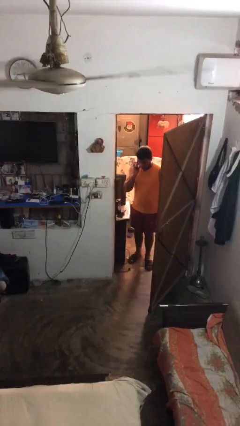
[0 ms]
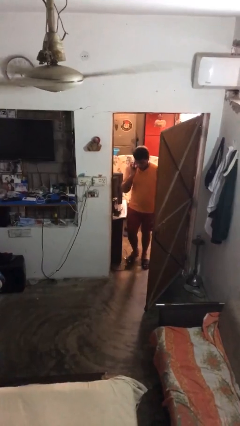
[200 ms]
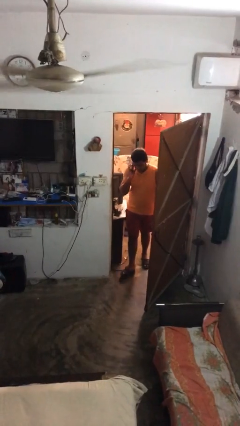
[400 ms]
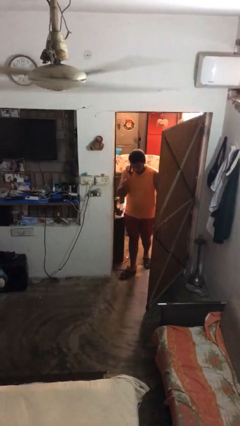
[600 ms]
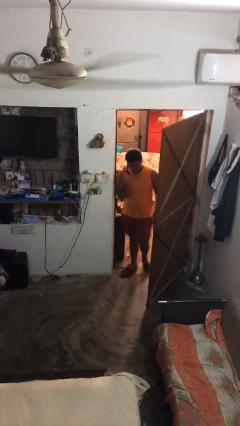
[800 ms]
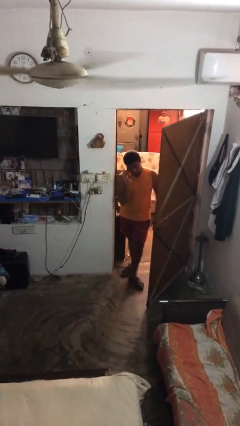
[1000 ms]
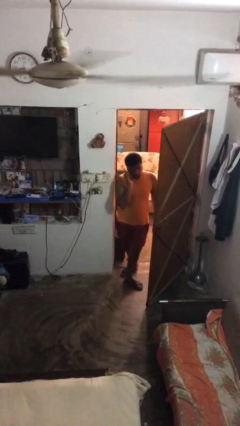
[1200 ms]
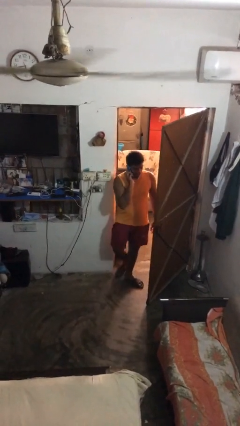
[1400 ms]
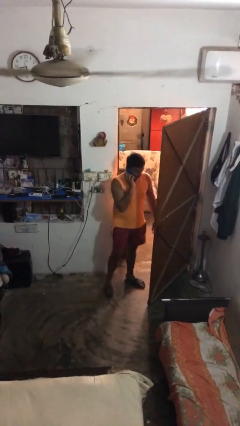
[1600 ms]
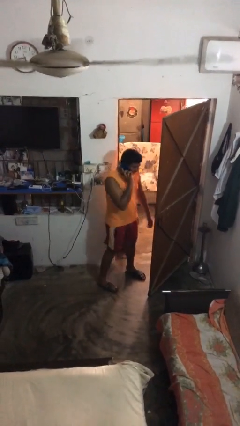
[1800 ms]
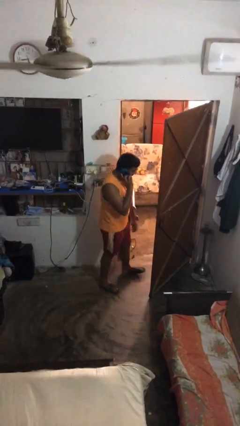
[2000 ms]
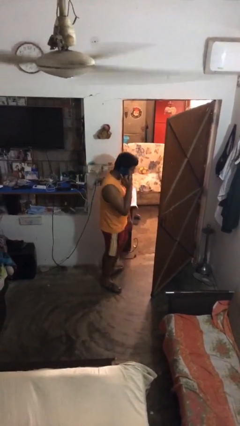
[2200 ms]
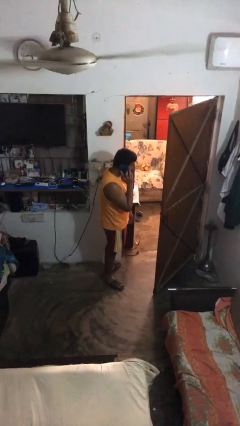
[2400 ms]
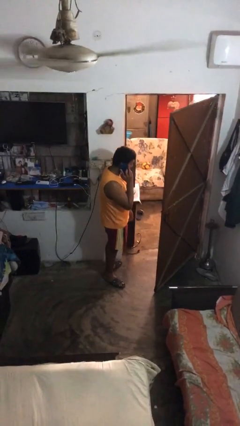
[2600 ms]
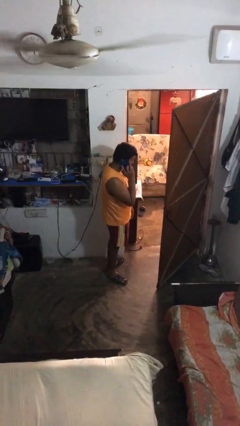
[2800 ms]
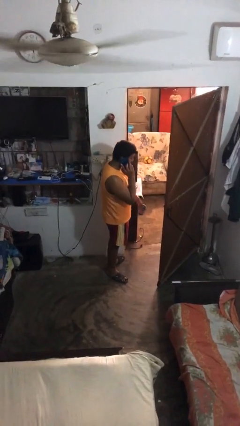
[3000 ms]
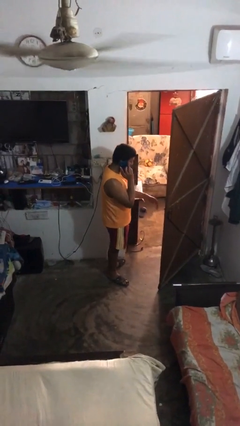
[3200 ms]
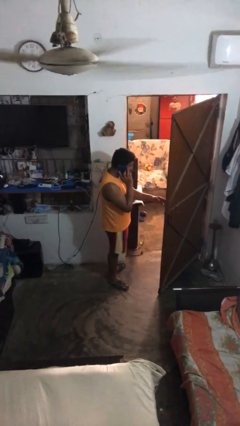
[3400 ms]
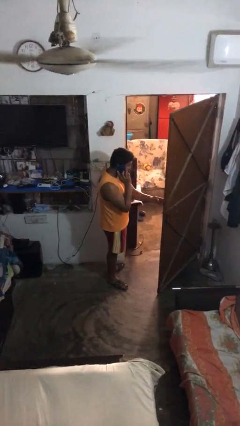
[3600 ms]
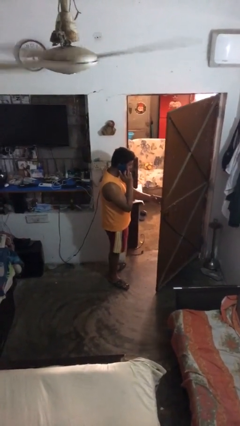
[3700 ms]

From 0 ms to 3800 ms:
person enters scene through structure

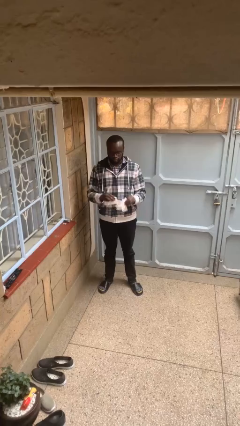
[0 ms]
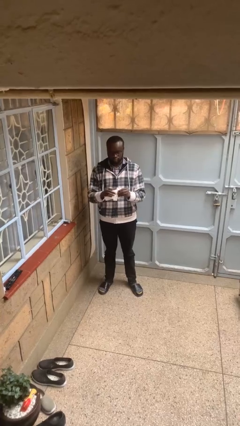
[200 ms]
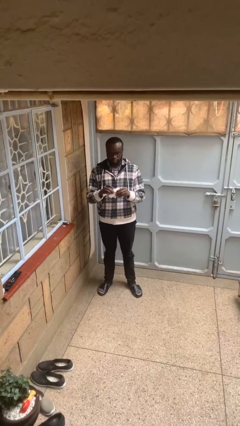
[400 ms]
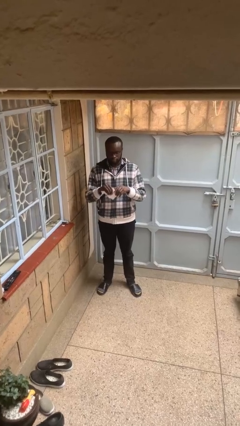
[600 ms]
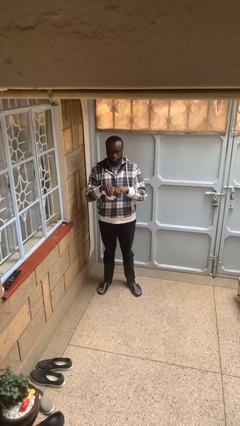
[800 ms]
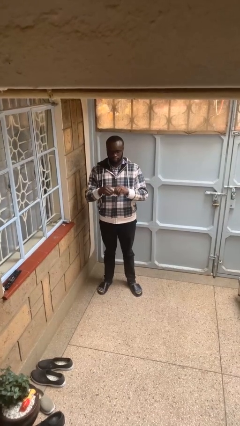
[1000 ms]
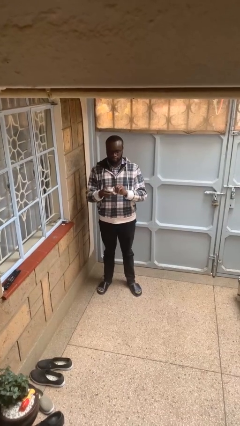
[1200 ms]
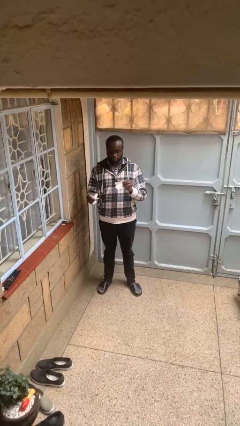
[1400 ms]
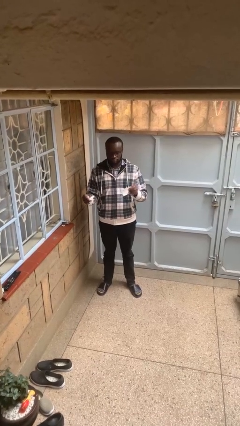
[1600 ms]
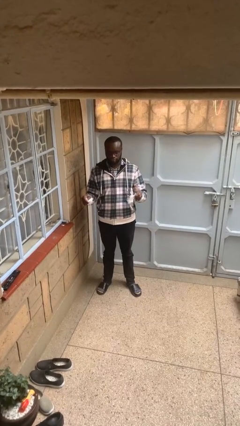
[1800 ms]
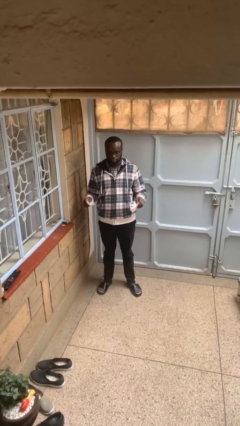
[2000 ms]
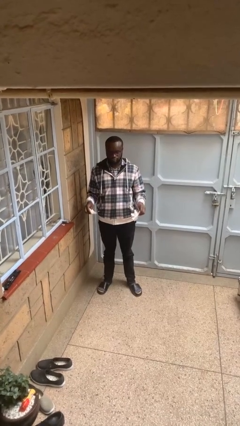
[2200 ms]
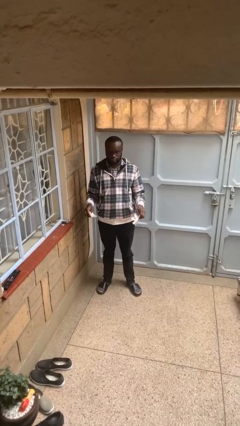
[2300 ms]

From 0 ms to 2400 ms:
person tears paper

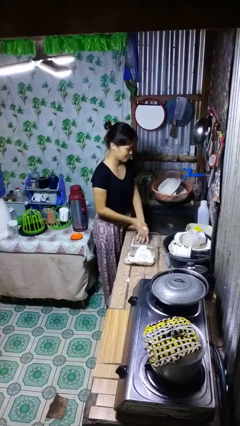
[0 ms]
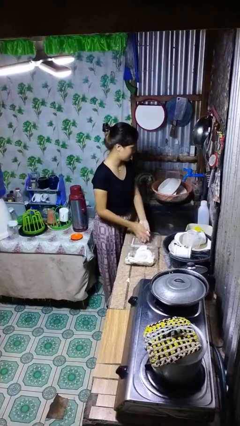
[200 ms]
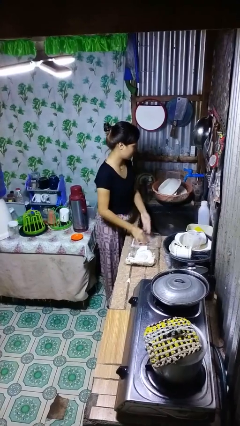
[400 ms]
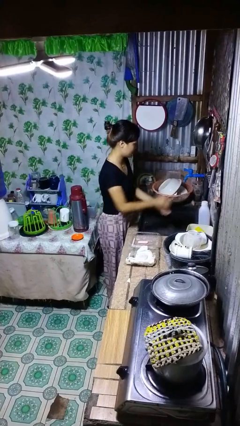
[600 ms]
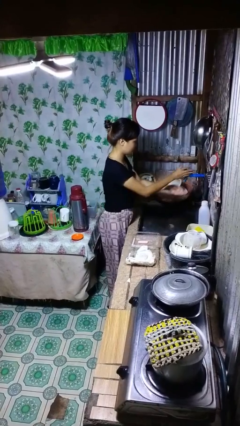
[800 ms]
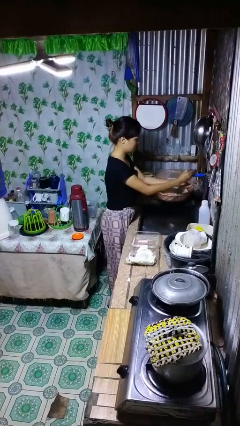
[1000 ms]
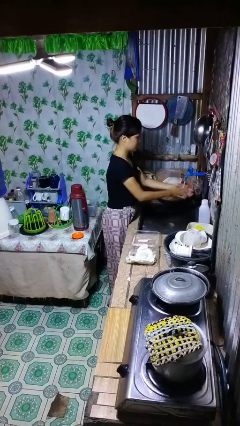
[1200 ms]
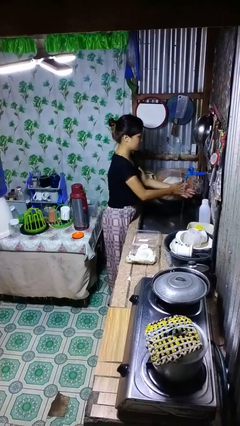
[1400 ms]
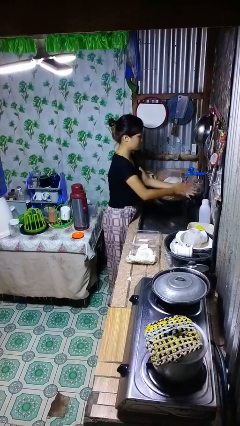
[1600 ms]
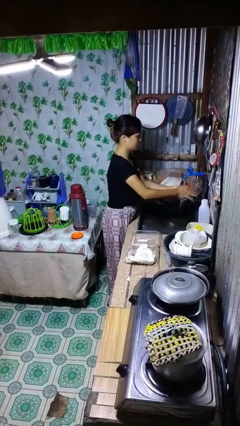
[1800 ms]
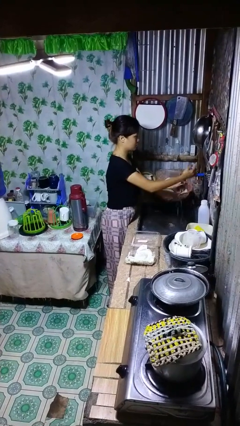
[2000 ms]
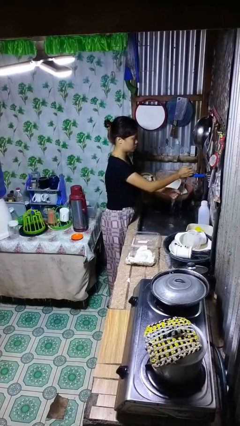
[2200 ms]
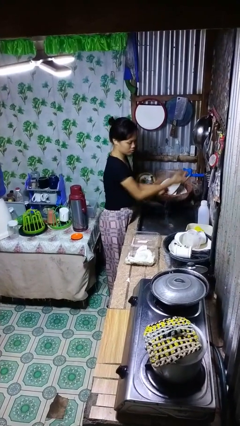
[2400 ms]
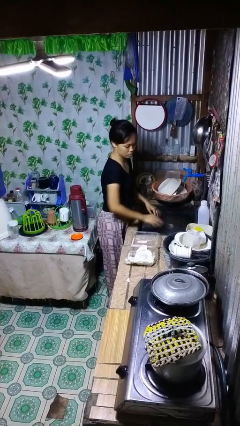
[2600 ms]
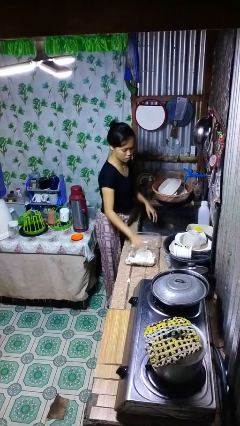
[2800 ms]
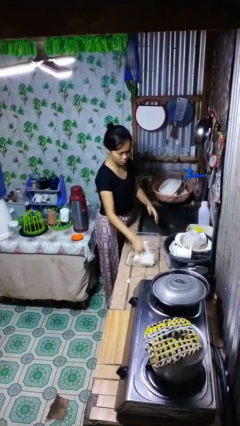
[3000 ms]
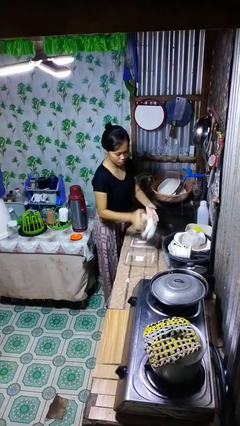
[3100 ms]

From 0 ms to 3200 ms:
person washes hands

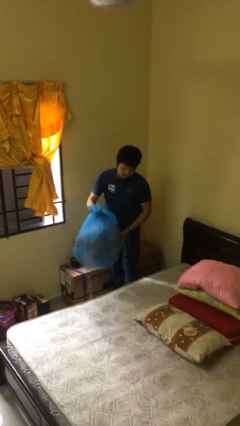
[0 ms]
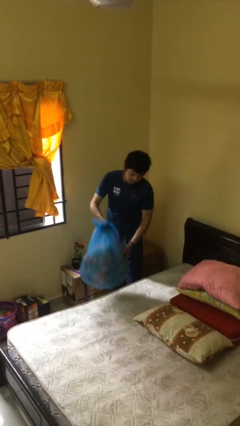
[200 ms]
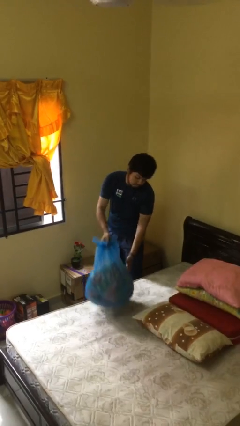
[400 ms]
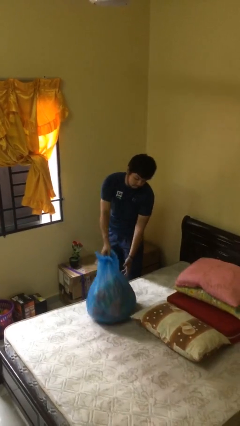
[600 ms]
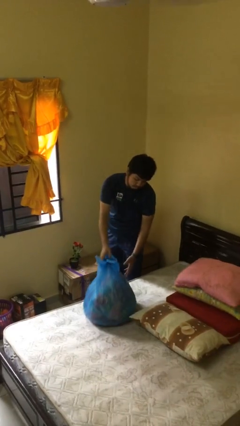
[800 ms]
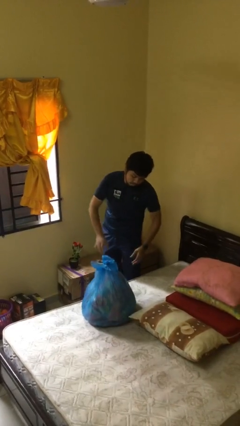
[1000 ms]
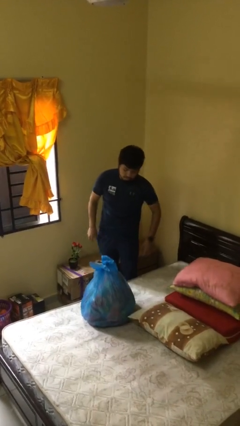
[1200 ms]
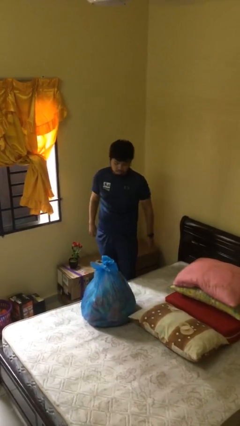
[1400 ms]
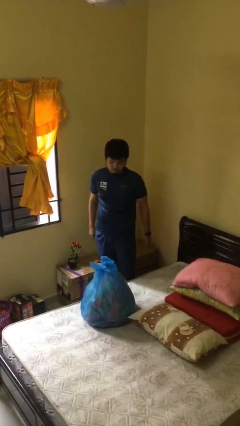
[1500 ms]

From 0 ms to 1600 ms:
person puts down object on bed

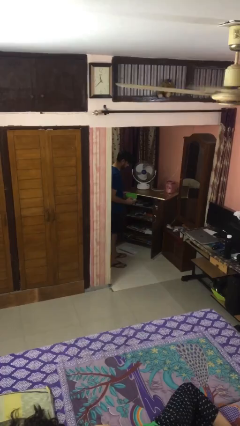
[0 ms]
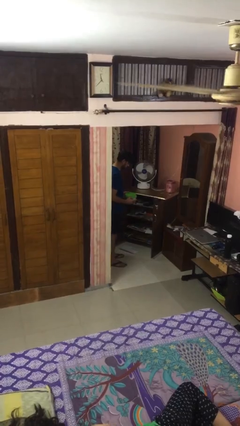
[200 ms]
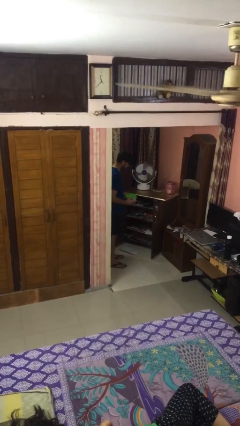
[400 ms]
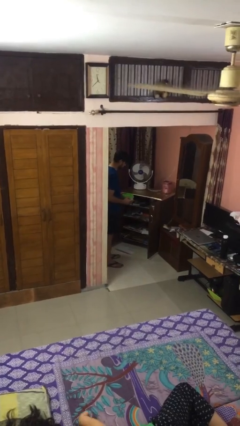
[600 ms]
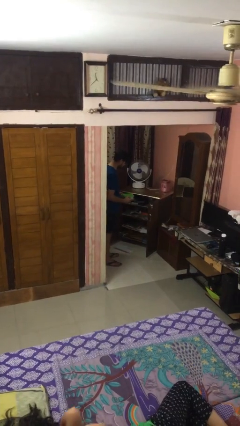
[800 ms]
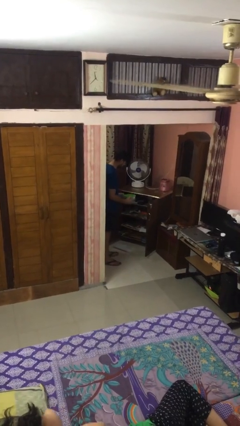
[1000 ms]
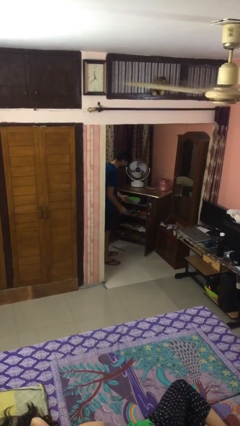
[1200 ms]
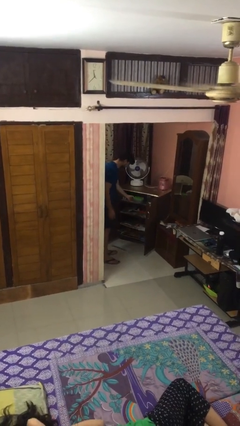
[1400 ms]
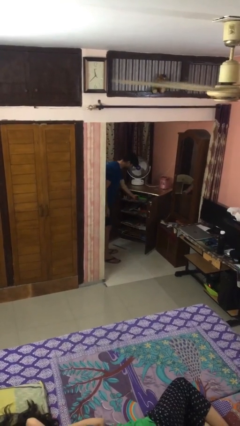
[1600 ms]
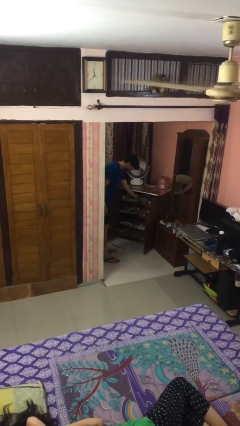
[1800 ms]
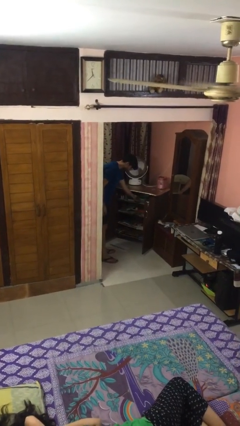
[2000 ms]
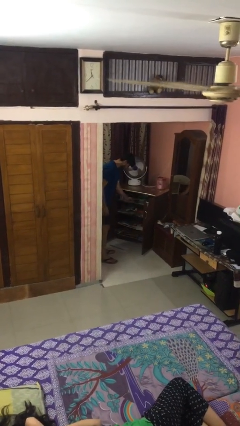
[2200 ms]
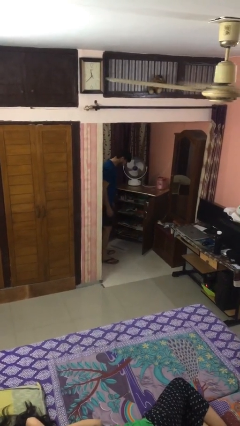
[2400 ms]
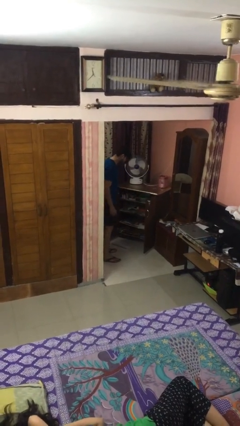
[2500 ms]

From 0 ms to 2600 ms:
person puts down object into cabinet

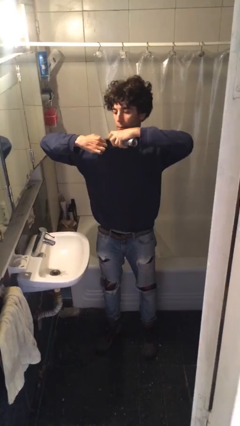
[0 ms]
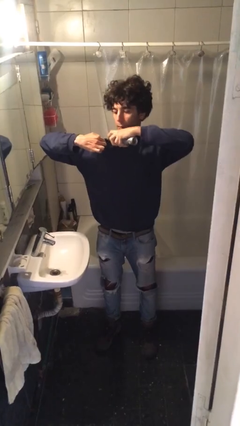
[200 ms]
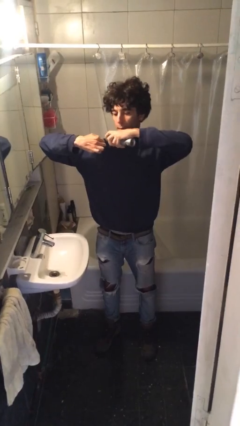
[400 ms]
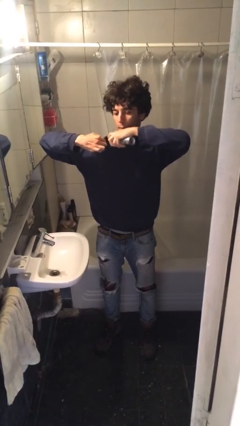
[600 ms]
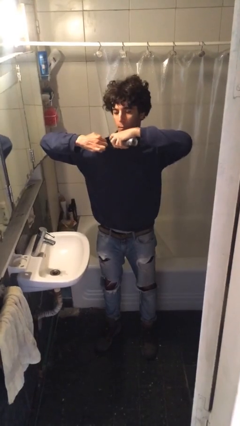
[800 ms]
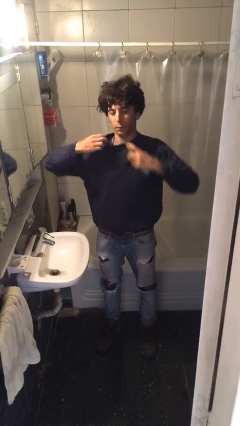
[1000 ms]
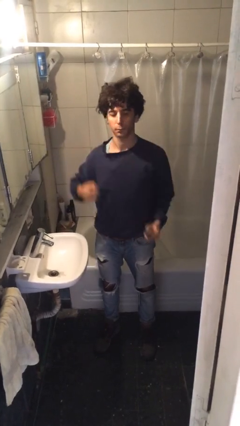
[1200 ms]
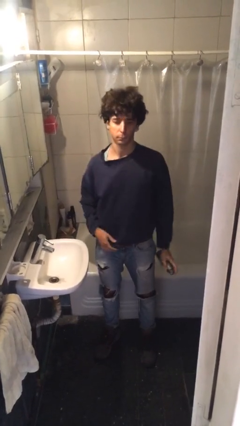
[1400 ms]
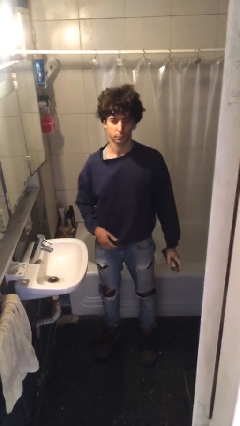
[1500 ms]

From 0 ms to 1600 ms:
person applies deodorant

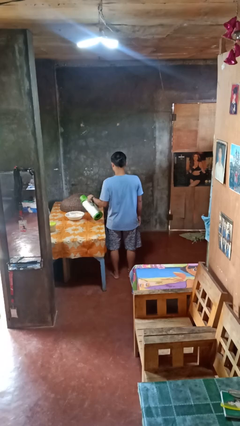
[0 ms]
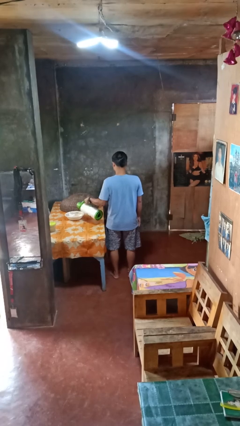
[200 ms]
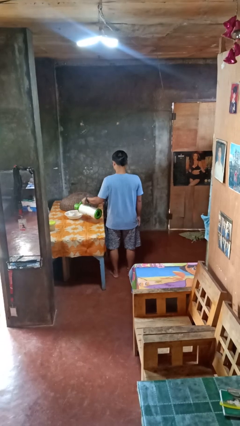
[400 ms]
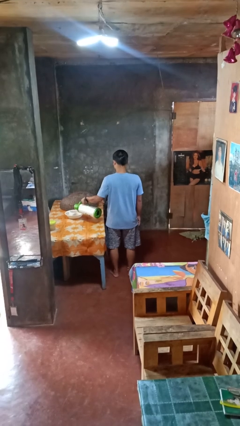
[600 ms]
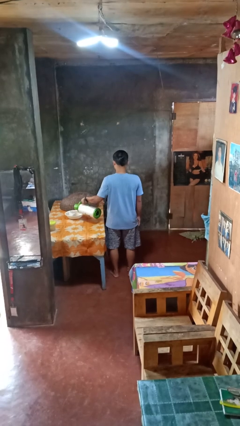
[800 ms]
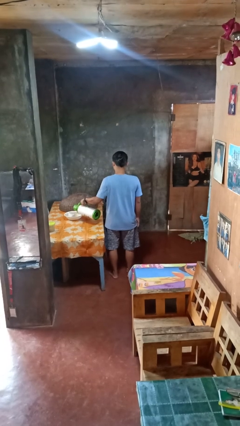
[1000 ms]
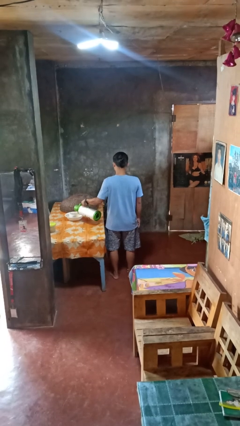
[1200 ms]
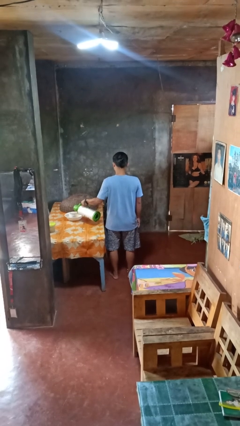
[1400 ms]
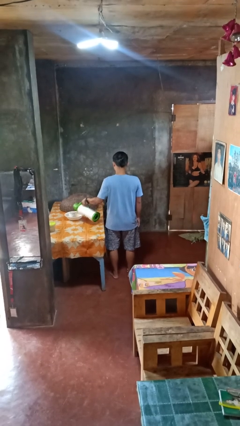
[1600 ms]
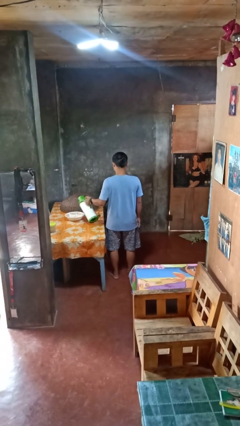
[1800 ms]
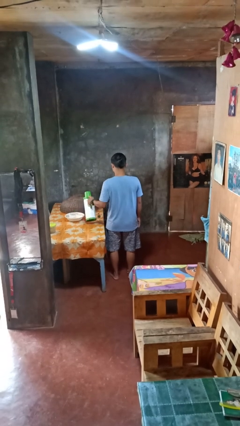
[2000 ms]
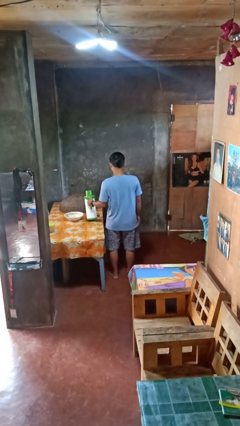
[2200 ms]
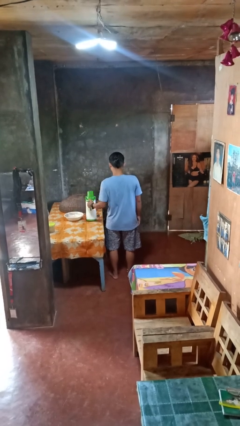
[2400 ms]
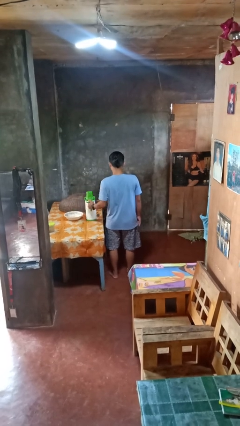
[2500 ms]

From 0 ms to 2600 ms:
person pours into bowl
